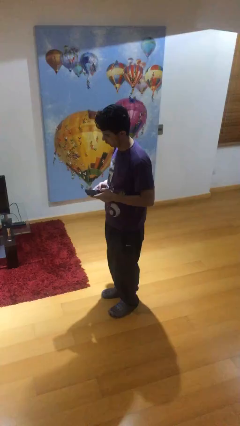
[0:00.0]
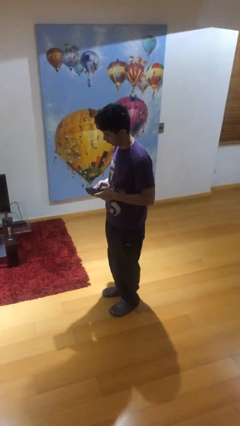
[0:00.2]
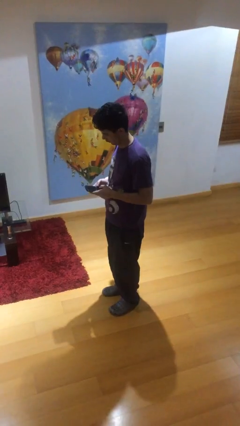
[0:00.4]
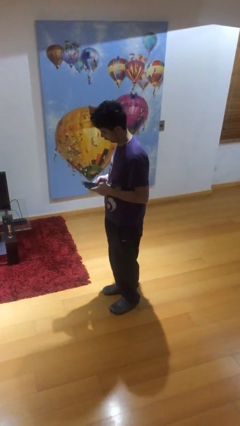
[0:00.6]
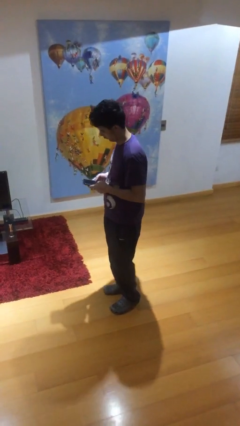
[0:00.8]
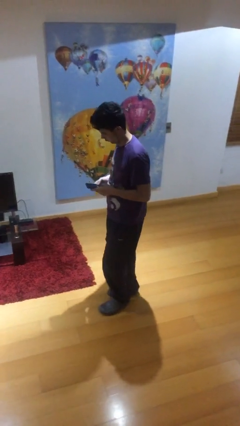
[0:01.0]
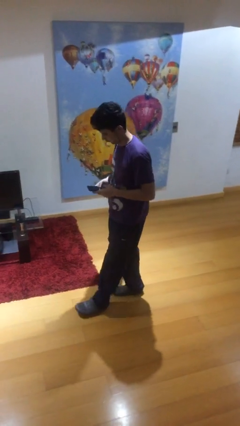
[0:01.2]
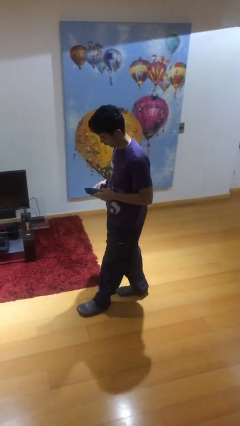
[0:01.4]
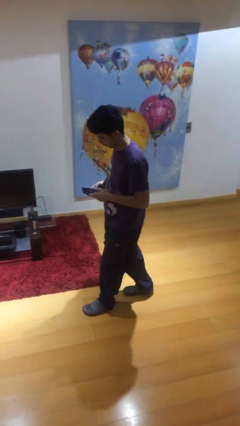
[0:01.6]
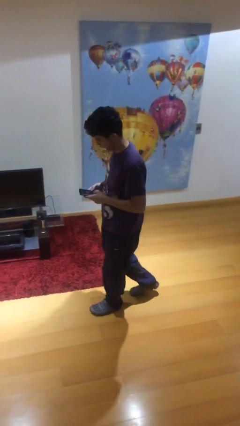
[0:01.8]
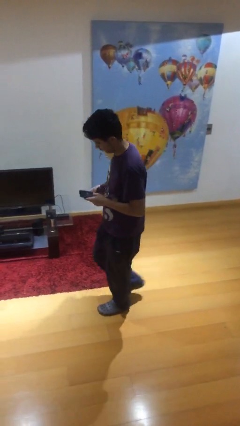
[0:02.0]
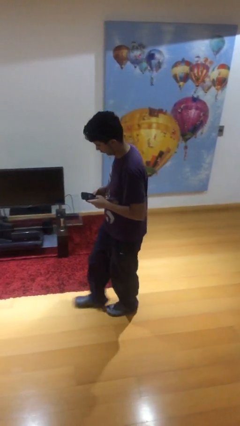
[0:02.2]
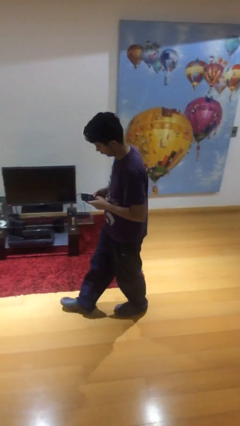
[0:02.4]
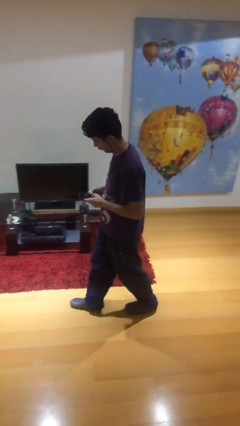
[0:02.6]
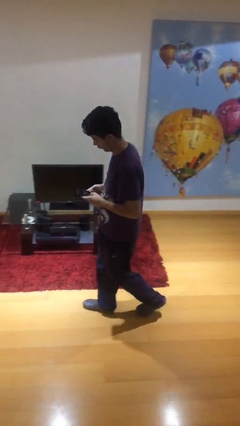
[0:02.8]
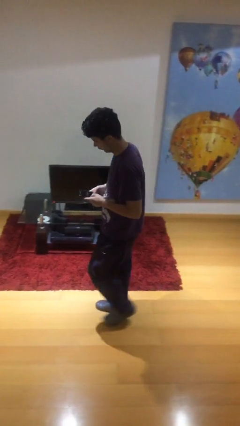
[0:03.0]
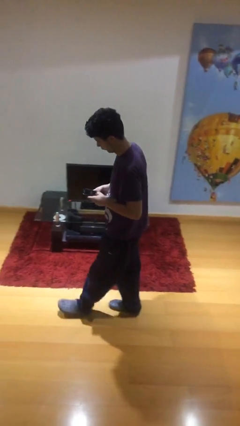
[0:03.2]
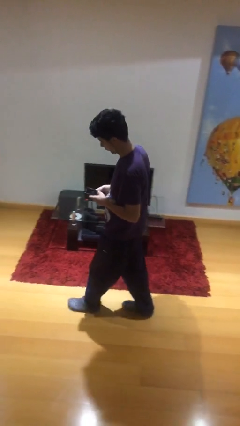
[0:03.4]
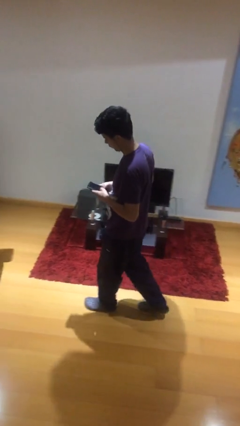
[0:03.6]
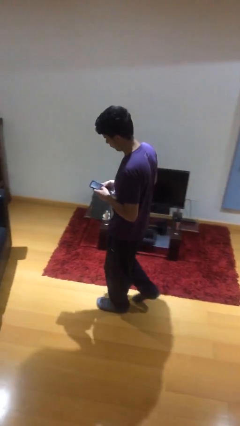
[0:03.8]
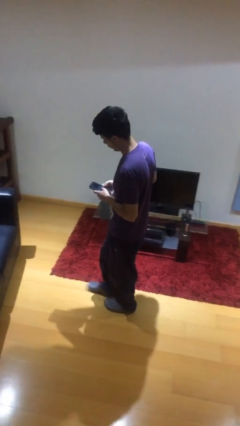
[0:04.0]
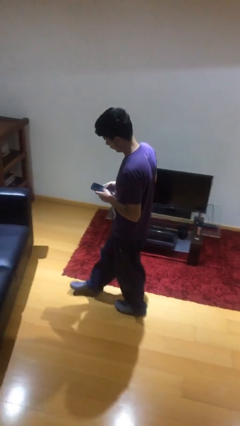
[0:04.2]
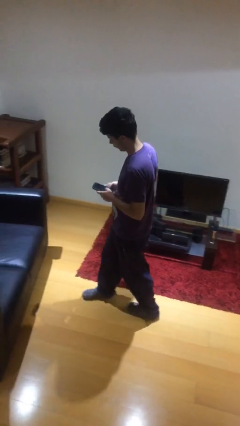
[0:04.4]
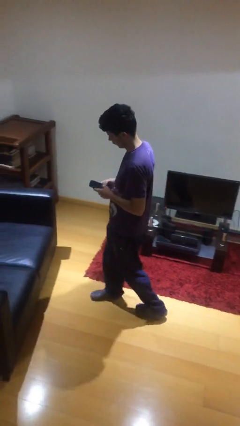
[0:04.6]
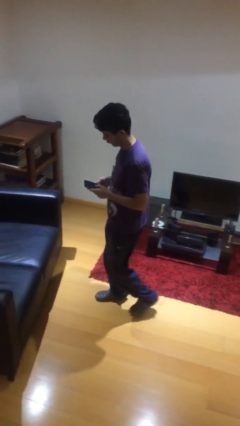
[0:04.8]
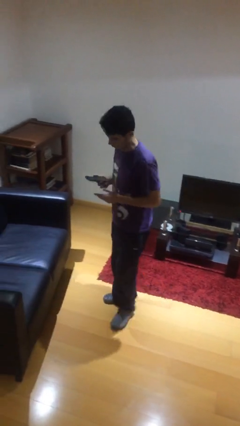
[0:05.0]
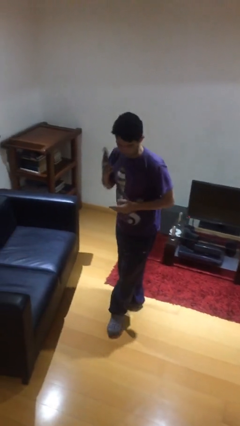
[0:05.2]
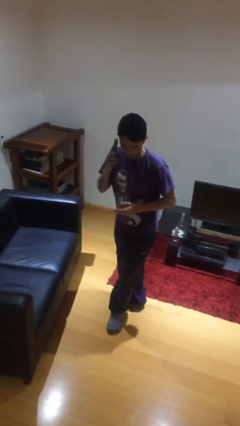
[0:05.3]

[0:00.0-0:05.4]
person texts on phone

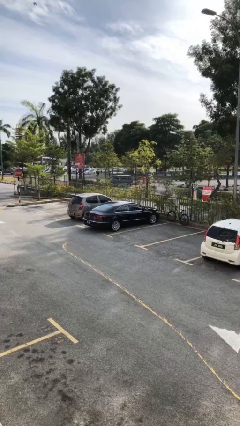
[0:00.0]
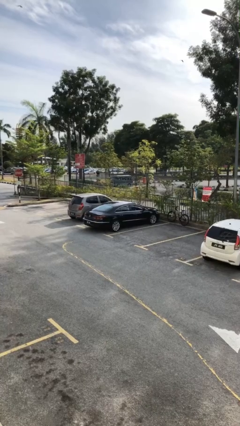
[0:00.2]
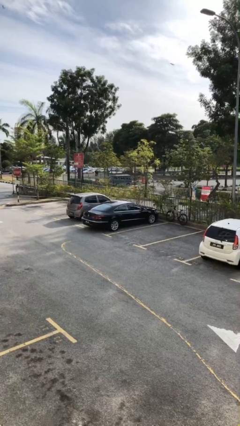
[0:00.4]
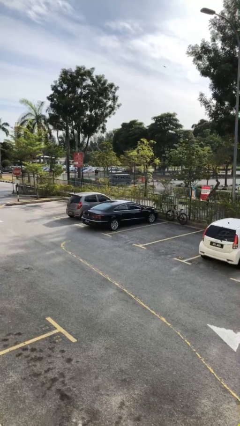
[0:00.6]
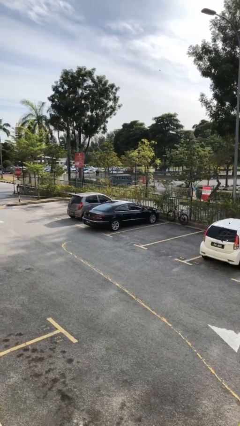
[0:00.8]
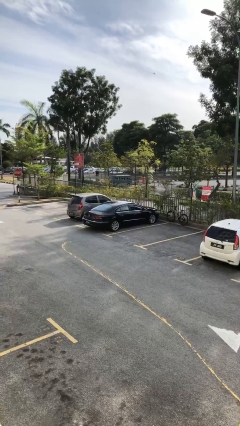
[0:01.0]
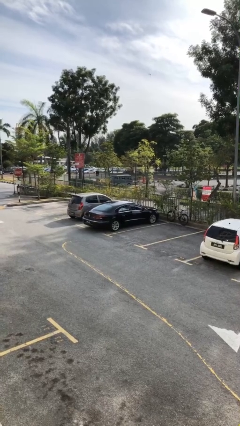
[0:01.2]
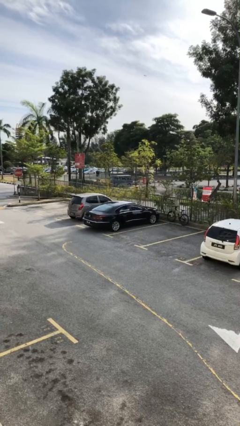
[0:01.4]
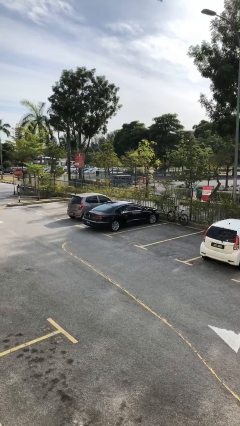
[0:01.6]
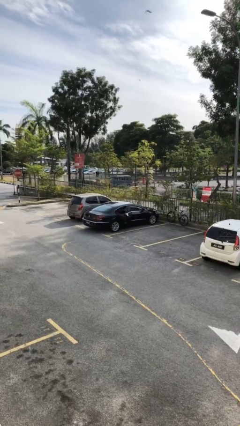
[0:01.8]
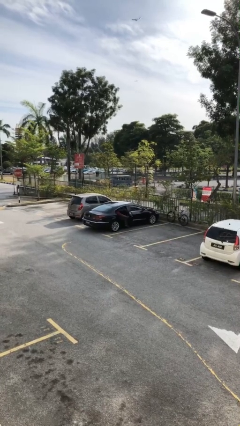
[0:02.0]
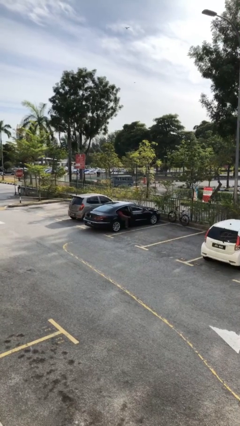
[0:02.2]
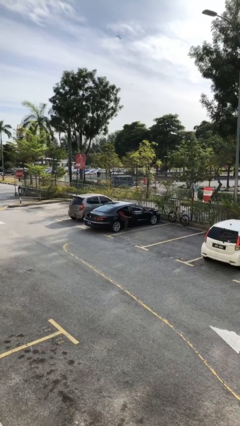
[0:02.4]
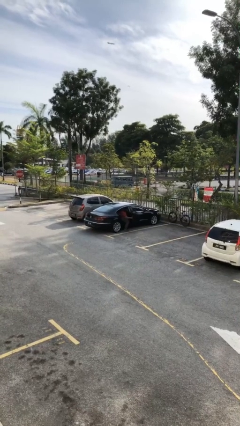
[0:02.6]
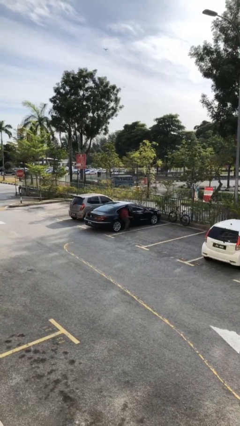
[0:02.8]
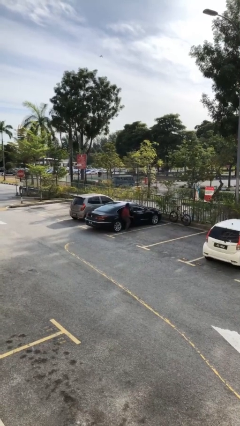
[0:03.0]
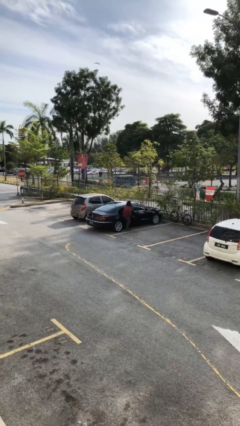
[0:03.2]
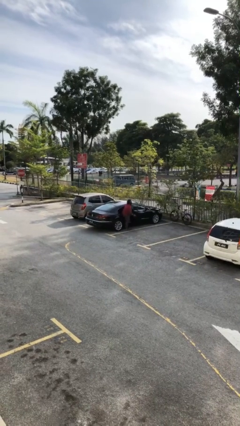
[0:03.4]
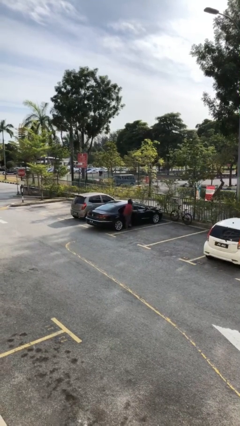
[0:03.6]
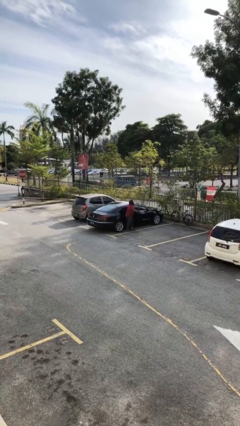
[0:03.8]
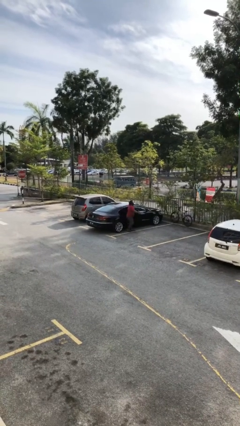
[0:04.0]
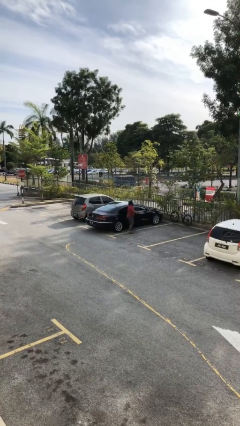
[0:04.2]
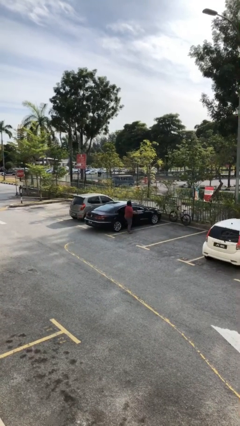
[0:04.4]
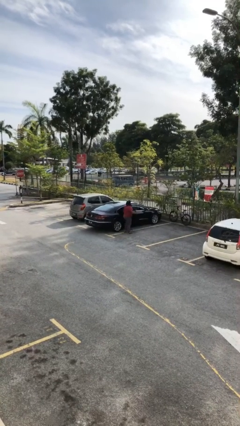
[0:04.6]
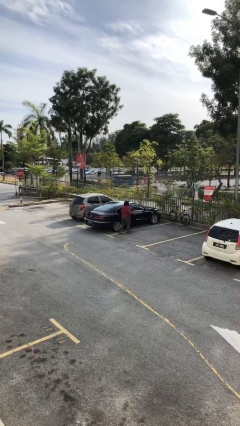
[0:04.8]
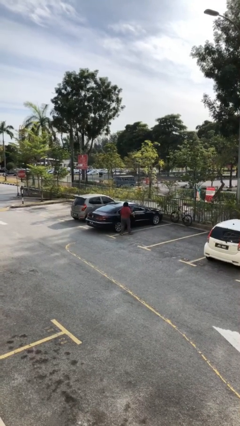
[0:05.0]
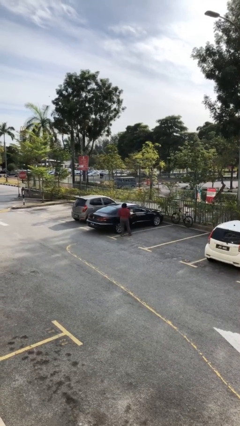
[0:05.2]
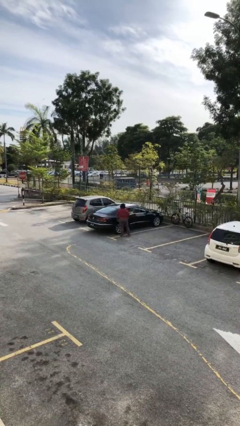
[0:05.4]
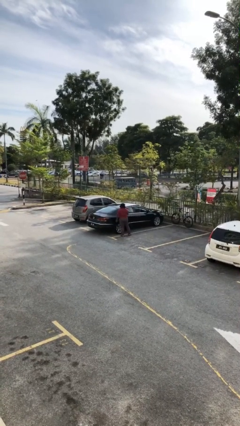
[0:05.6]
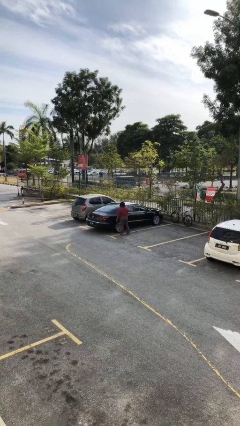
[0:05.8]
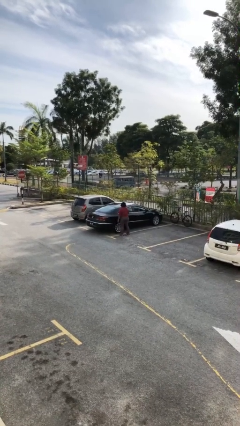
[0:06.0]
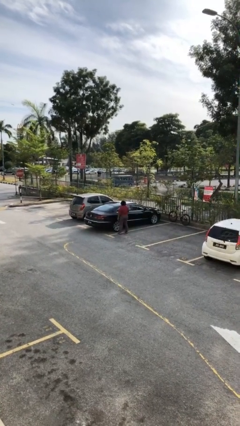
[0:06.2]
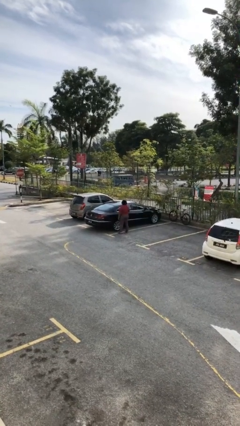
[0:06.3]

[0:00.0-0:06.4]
car drops off person

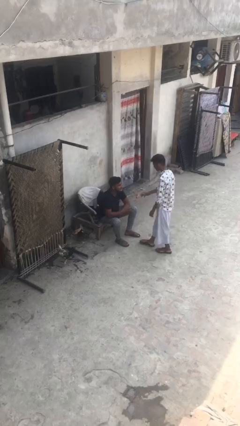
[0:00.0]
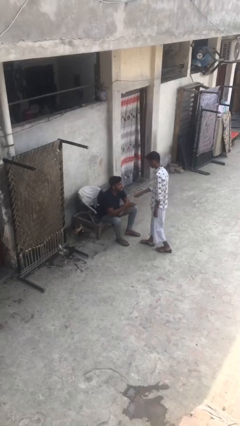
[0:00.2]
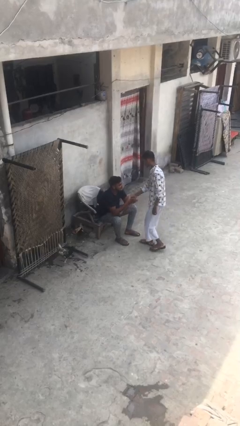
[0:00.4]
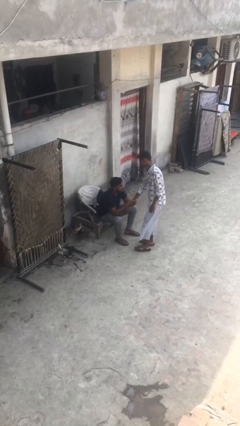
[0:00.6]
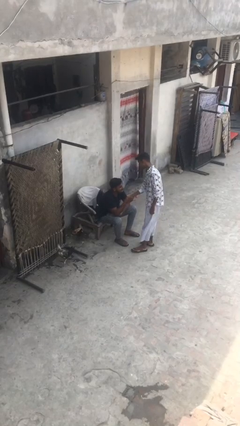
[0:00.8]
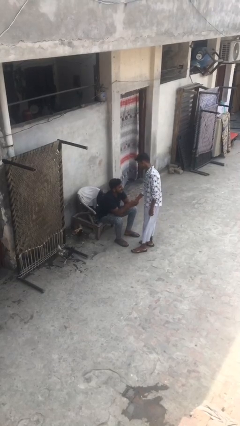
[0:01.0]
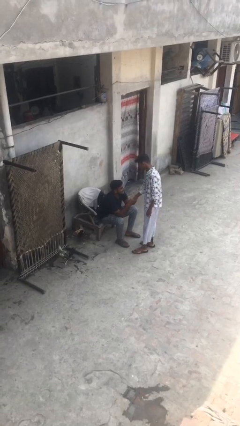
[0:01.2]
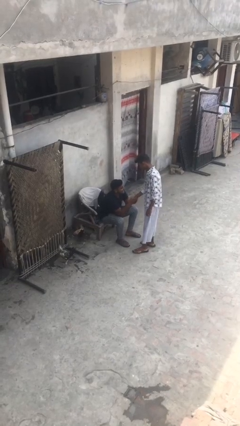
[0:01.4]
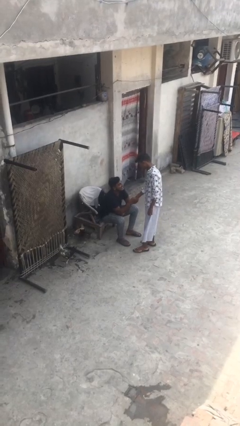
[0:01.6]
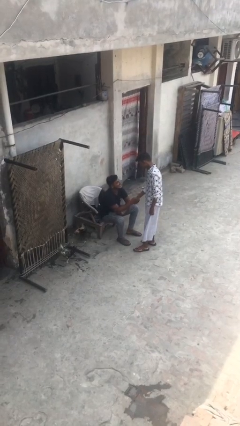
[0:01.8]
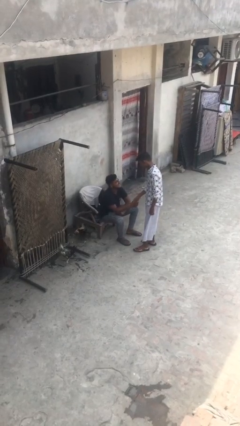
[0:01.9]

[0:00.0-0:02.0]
person shakes hand

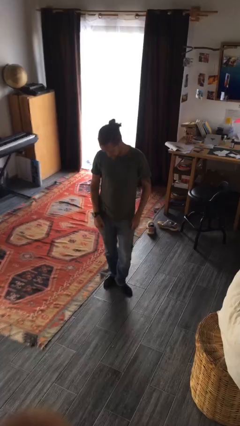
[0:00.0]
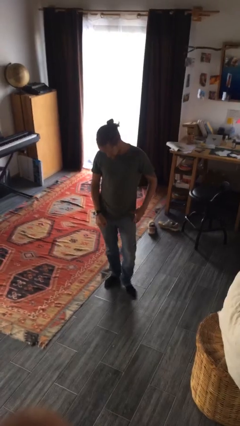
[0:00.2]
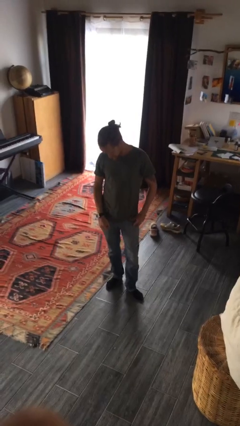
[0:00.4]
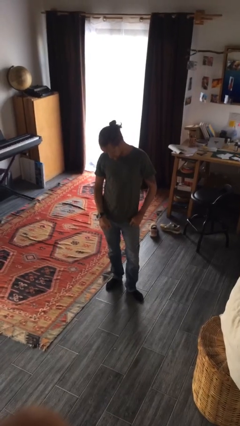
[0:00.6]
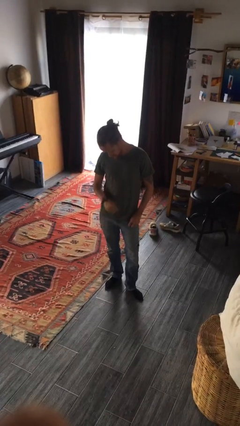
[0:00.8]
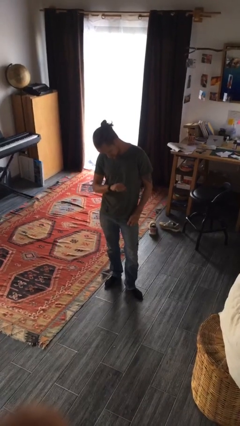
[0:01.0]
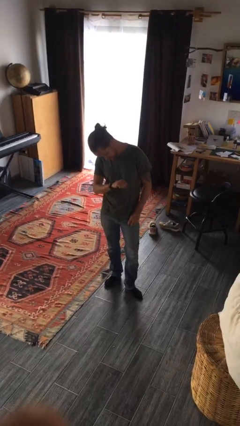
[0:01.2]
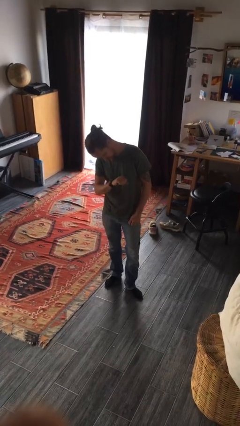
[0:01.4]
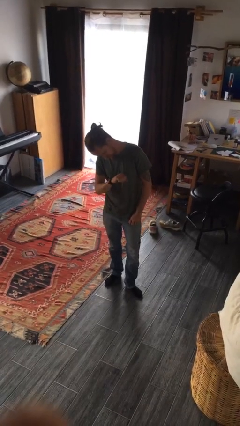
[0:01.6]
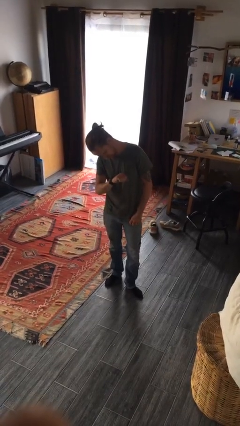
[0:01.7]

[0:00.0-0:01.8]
person looks at wristwatch

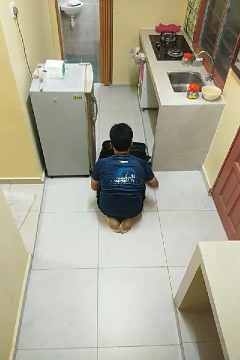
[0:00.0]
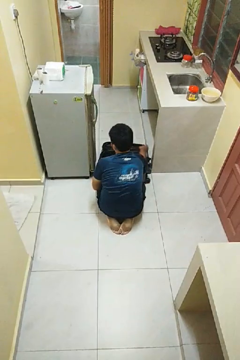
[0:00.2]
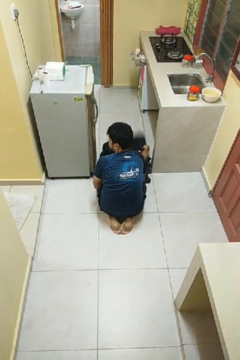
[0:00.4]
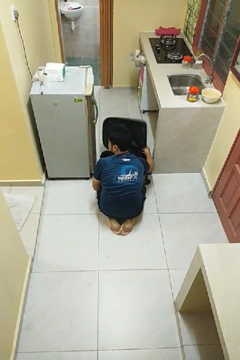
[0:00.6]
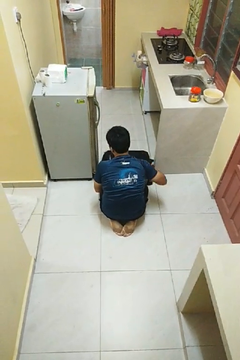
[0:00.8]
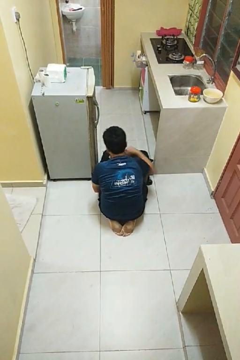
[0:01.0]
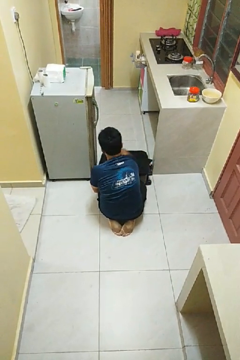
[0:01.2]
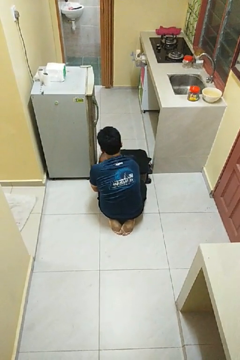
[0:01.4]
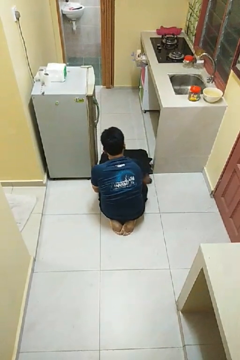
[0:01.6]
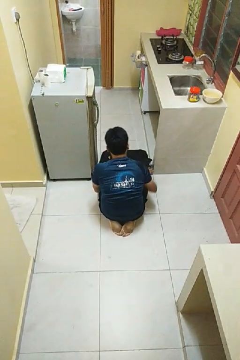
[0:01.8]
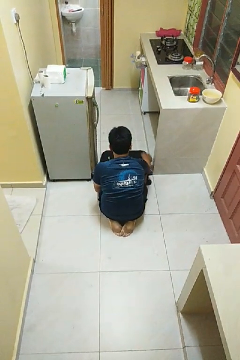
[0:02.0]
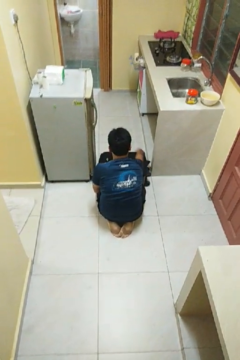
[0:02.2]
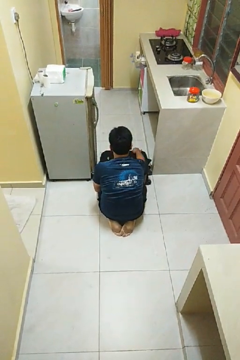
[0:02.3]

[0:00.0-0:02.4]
person closes suitcase

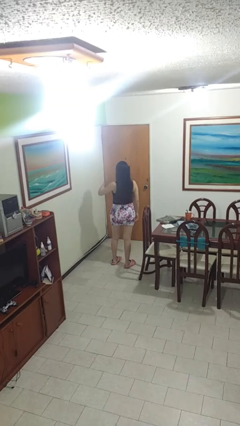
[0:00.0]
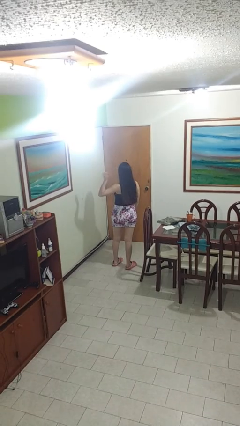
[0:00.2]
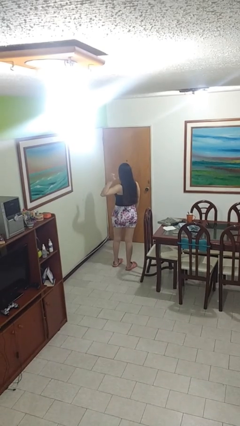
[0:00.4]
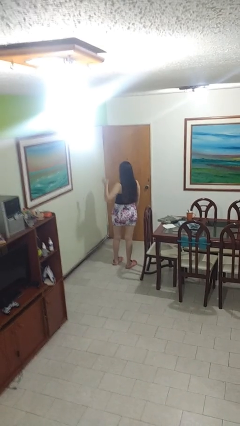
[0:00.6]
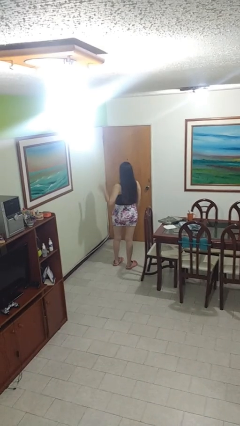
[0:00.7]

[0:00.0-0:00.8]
person gestures behind me
